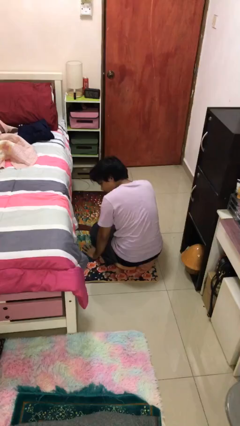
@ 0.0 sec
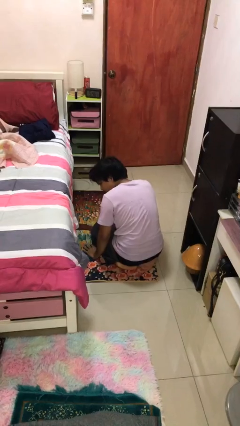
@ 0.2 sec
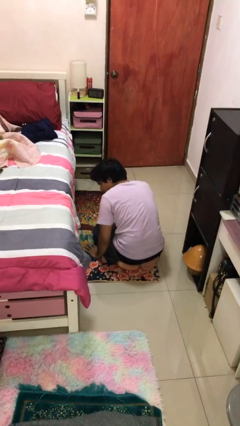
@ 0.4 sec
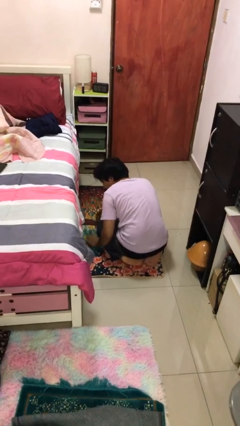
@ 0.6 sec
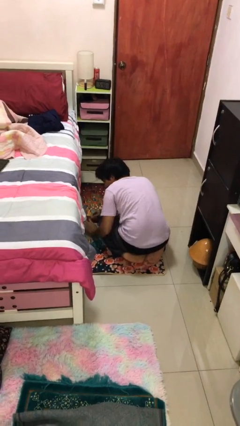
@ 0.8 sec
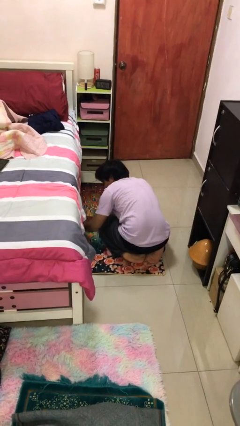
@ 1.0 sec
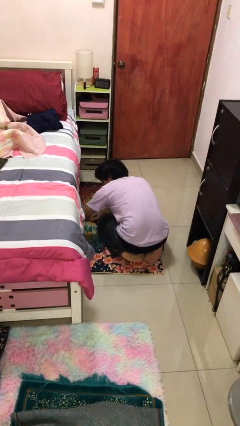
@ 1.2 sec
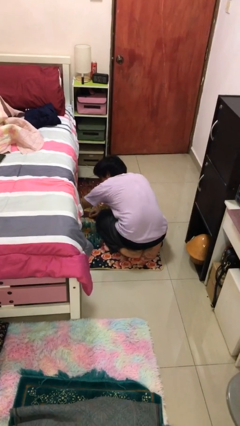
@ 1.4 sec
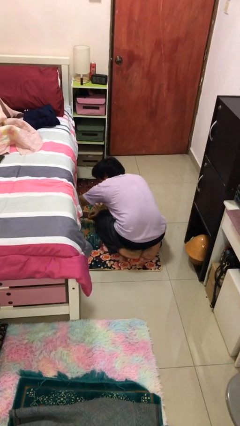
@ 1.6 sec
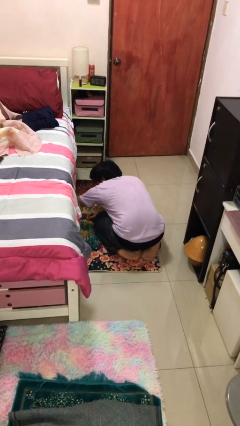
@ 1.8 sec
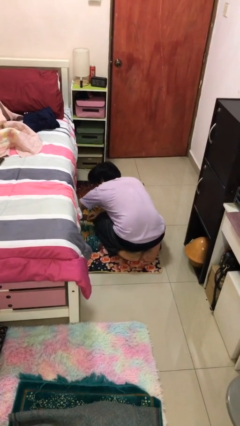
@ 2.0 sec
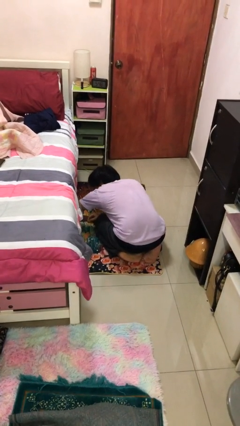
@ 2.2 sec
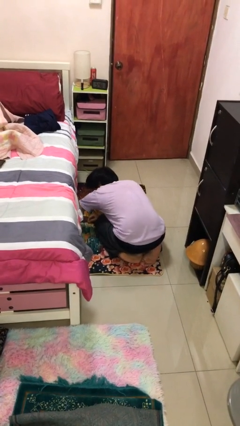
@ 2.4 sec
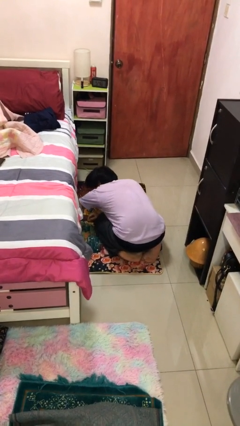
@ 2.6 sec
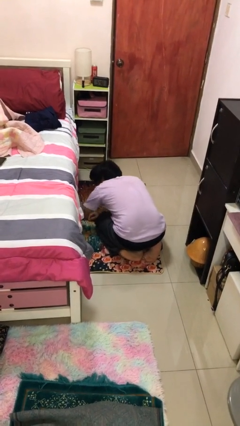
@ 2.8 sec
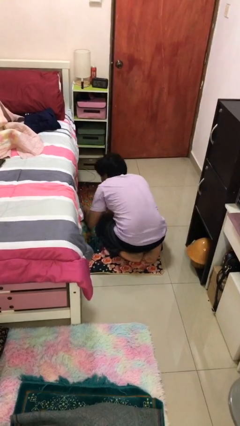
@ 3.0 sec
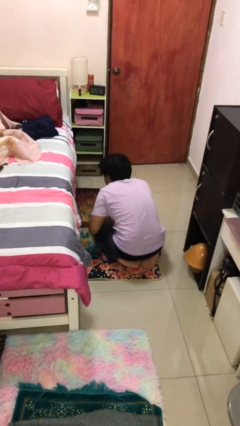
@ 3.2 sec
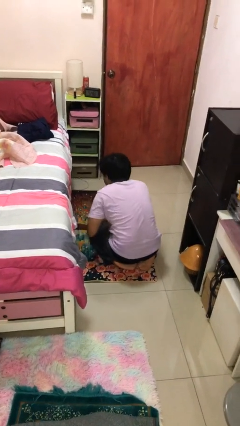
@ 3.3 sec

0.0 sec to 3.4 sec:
person searches under bed

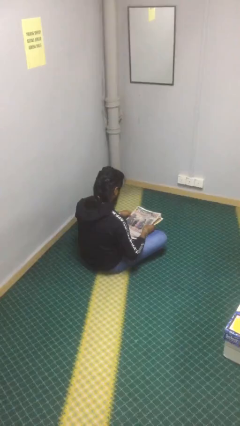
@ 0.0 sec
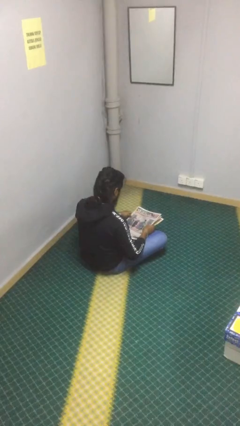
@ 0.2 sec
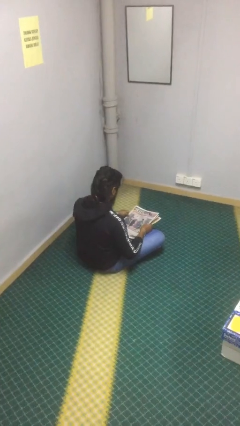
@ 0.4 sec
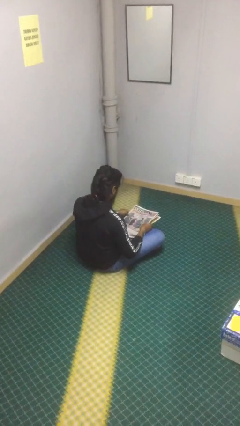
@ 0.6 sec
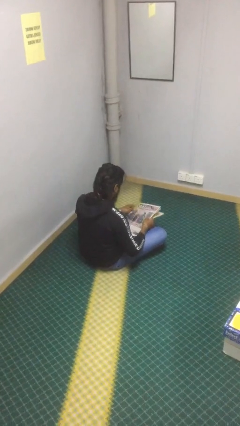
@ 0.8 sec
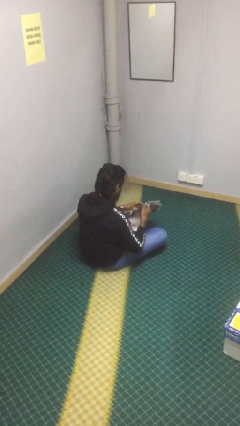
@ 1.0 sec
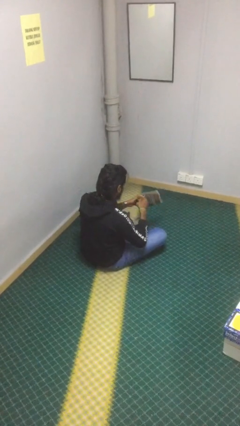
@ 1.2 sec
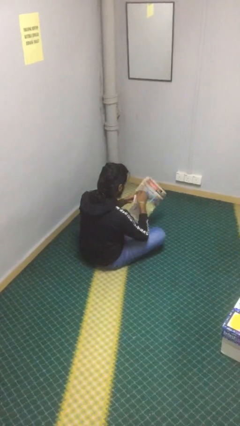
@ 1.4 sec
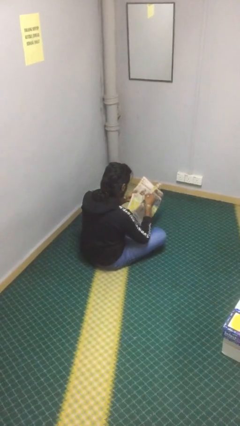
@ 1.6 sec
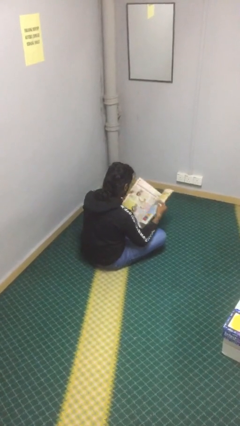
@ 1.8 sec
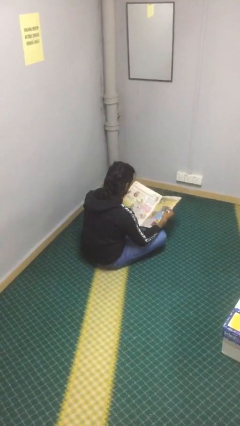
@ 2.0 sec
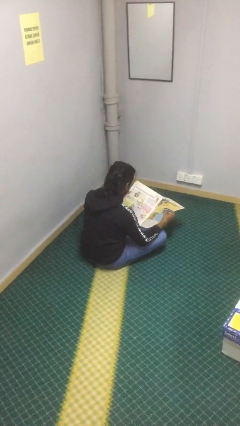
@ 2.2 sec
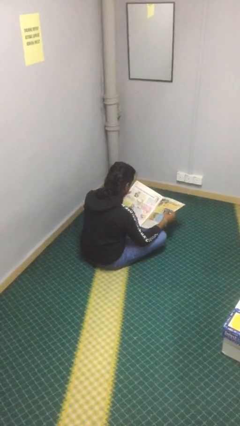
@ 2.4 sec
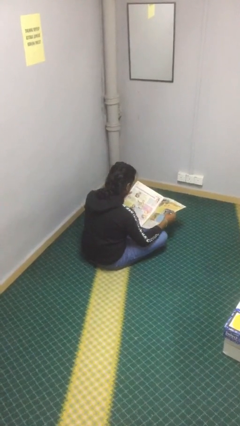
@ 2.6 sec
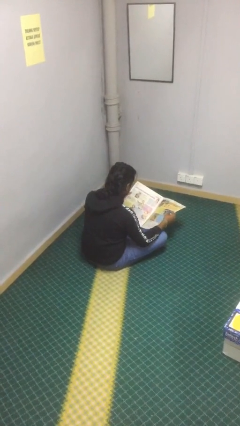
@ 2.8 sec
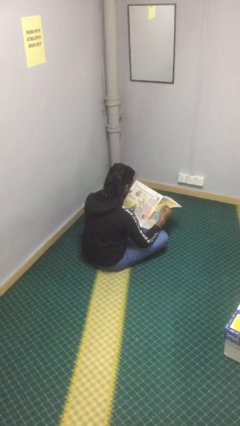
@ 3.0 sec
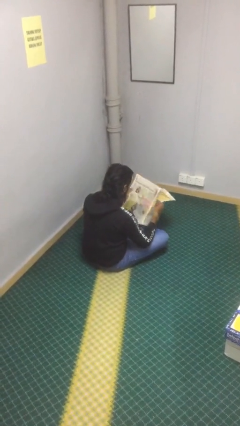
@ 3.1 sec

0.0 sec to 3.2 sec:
person reads newspaper

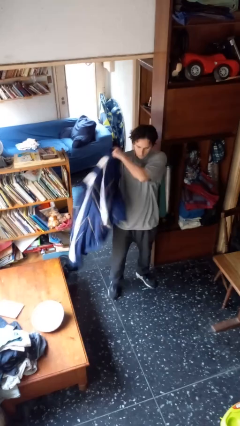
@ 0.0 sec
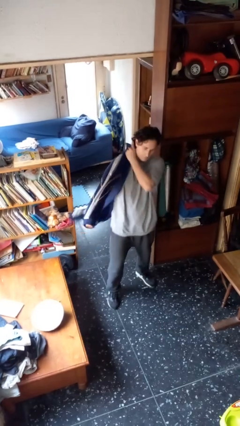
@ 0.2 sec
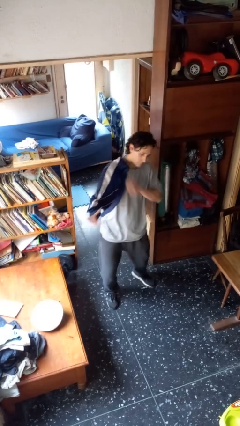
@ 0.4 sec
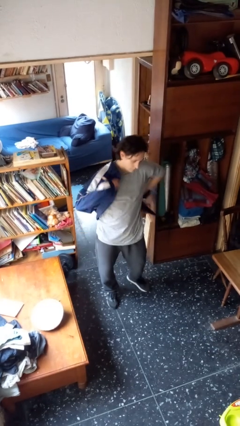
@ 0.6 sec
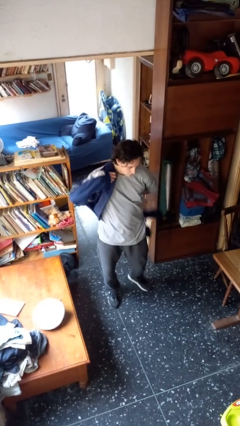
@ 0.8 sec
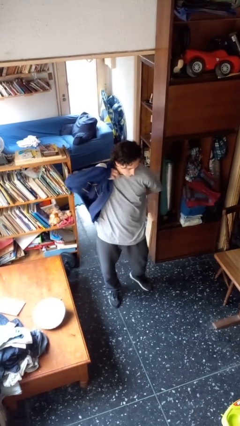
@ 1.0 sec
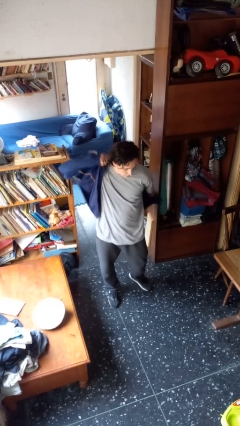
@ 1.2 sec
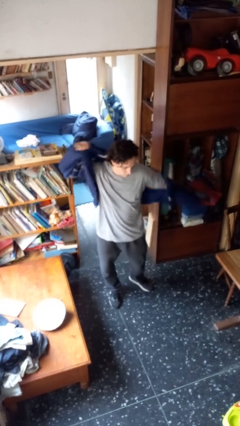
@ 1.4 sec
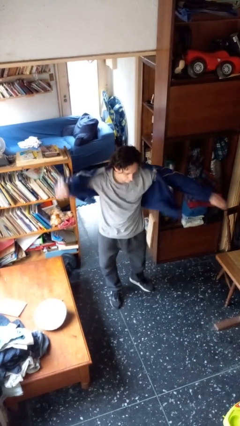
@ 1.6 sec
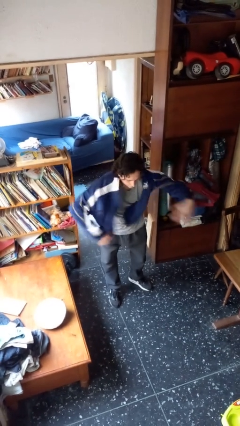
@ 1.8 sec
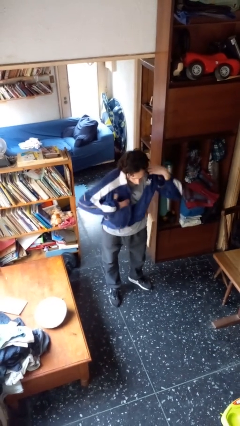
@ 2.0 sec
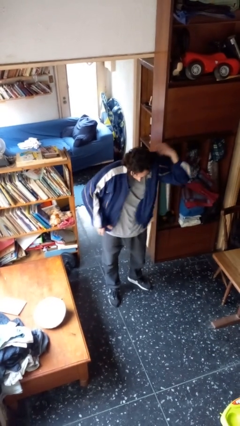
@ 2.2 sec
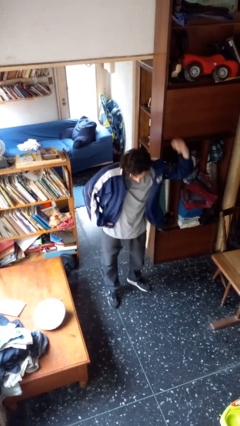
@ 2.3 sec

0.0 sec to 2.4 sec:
person puts on jacket

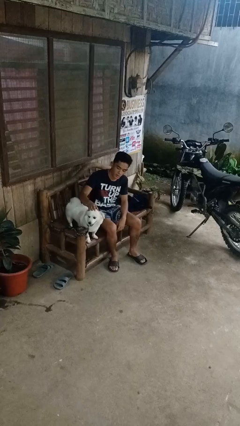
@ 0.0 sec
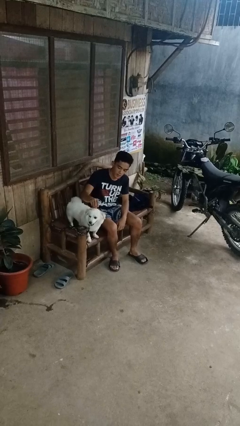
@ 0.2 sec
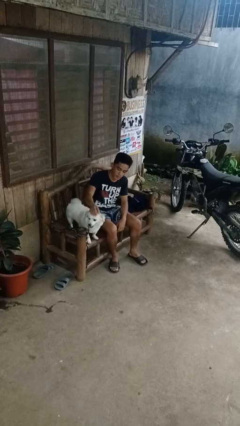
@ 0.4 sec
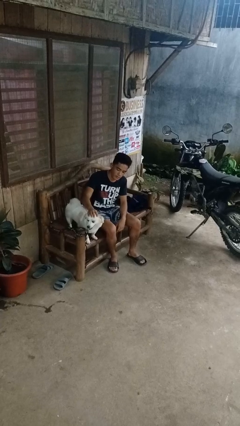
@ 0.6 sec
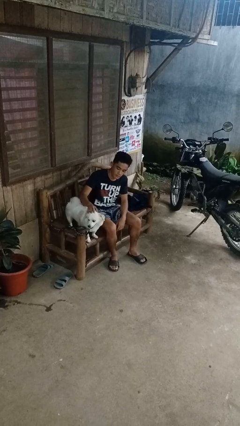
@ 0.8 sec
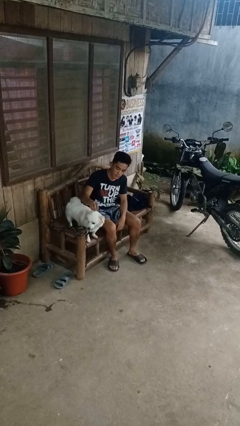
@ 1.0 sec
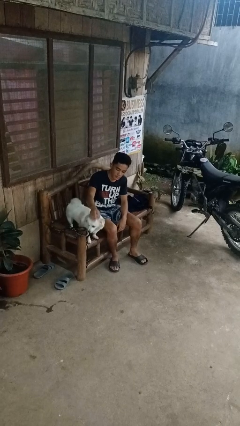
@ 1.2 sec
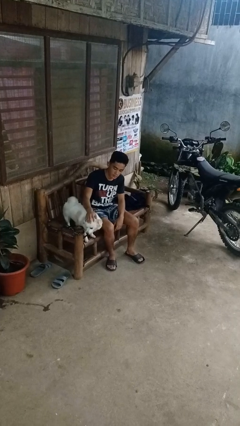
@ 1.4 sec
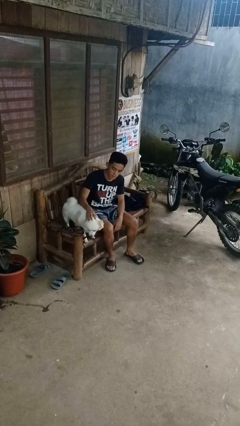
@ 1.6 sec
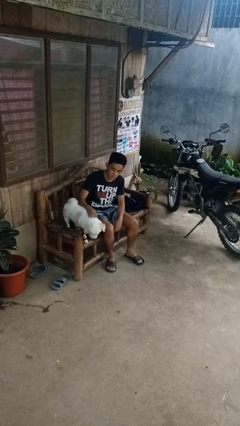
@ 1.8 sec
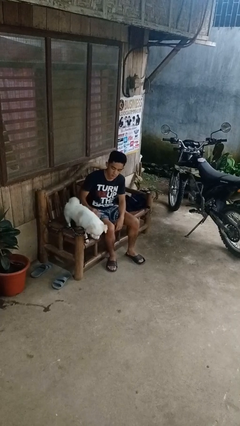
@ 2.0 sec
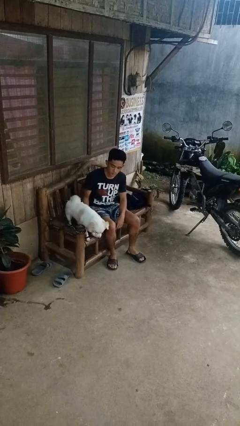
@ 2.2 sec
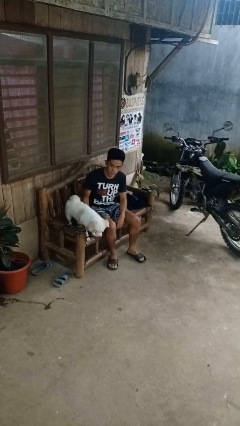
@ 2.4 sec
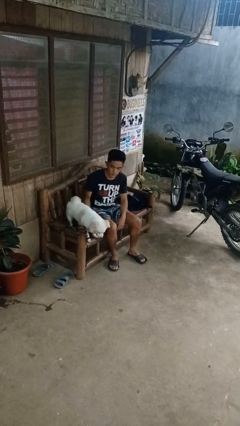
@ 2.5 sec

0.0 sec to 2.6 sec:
person pets dog

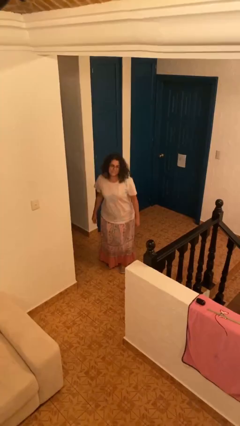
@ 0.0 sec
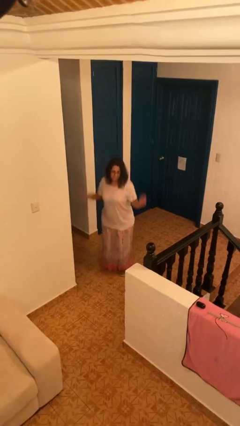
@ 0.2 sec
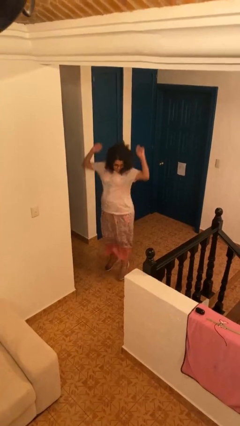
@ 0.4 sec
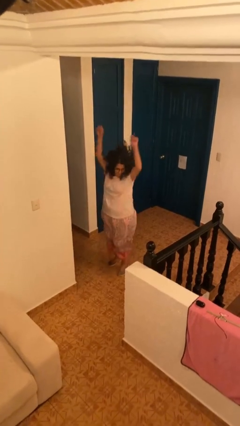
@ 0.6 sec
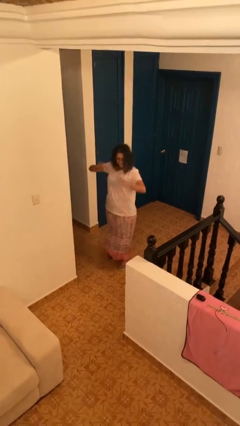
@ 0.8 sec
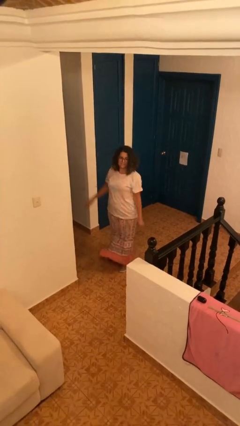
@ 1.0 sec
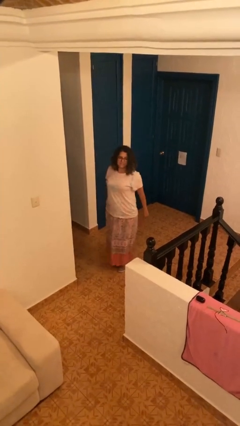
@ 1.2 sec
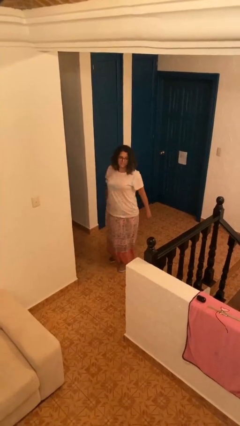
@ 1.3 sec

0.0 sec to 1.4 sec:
person jumps

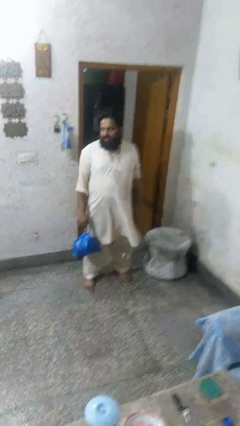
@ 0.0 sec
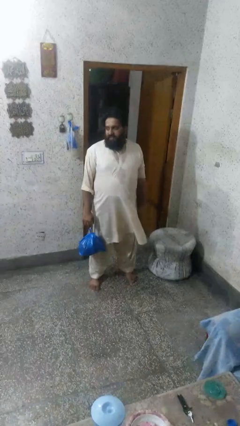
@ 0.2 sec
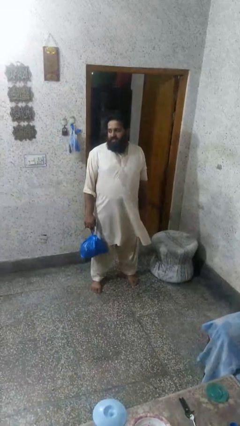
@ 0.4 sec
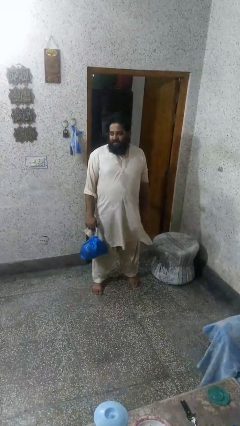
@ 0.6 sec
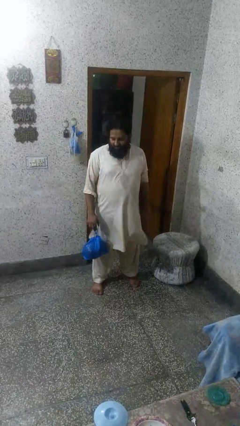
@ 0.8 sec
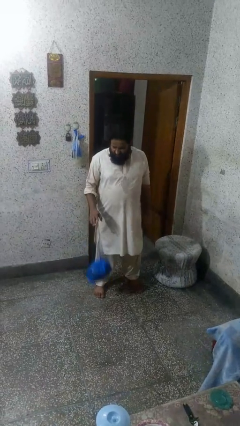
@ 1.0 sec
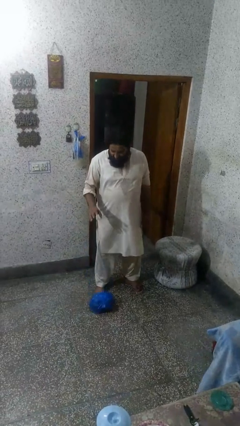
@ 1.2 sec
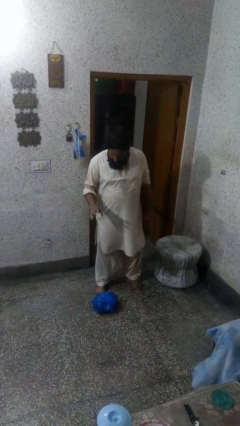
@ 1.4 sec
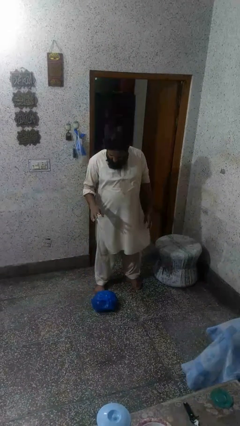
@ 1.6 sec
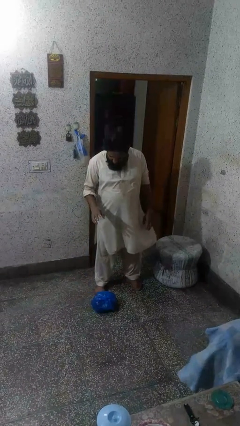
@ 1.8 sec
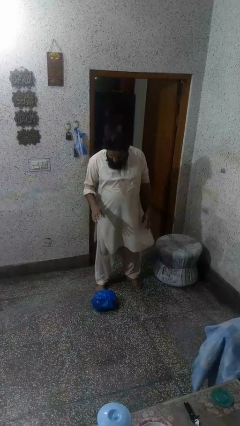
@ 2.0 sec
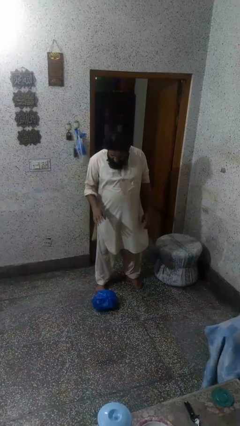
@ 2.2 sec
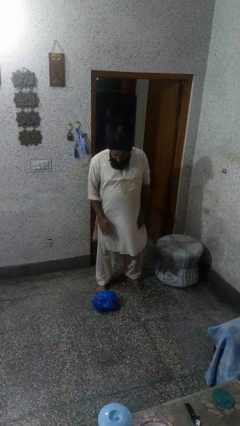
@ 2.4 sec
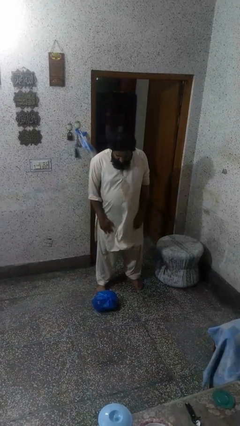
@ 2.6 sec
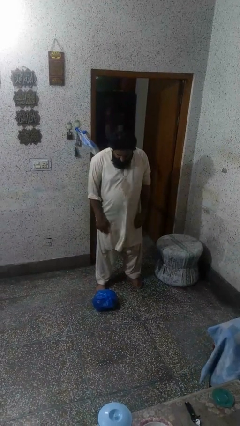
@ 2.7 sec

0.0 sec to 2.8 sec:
person drops object

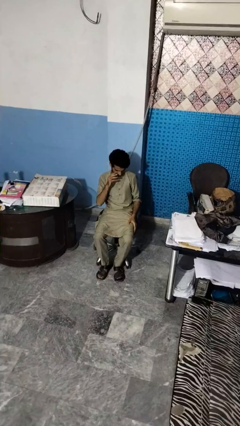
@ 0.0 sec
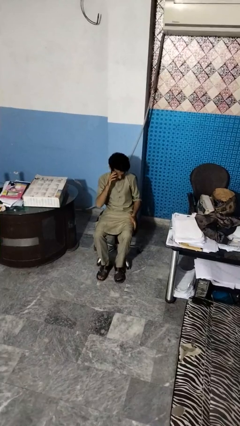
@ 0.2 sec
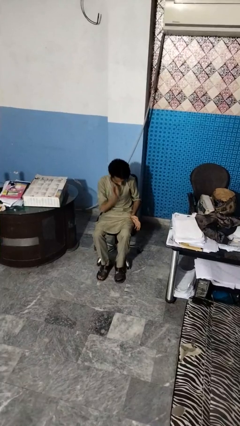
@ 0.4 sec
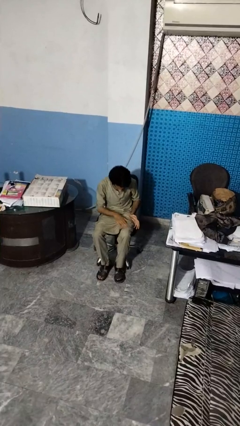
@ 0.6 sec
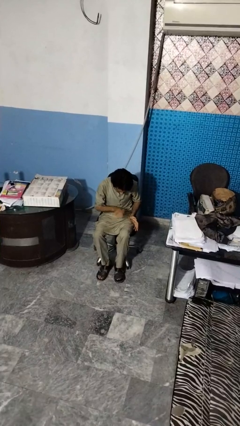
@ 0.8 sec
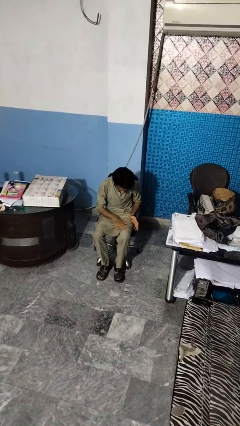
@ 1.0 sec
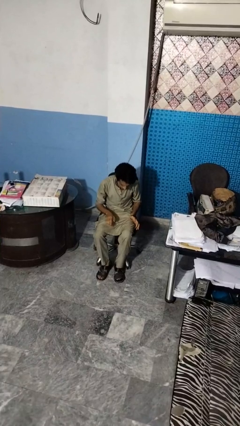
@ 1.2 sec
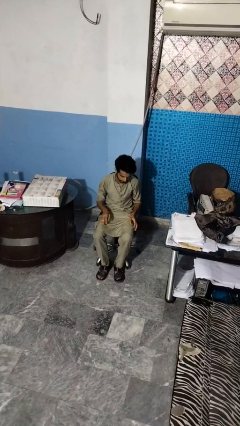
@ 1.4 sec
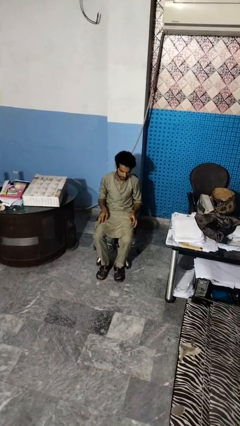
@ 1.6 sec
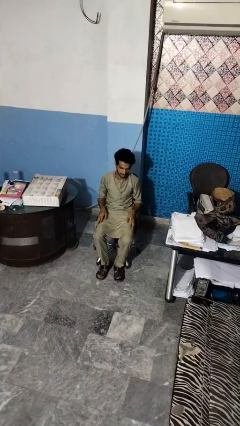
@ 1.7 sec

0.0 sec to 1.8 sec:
person swats bug
